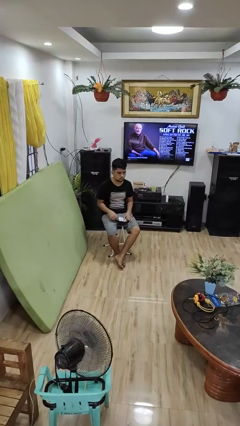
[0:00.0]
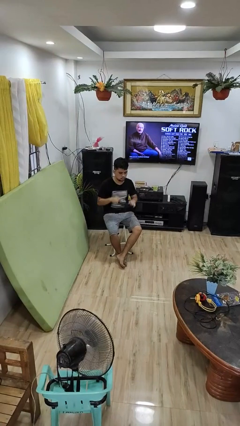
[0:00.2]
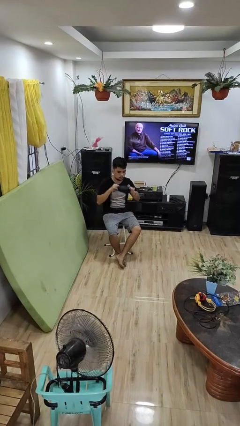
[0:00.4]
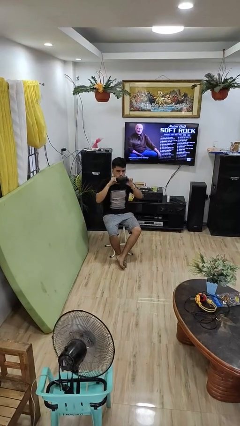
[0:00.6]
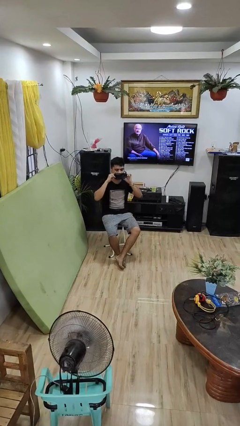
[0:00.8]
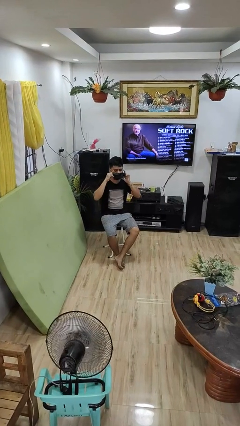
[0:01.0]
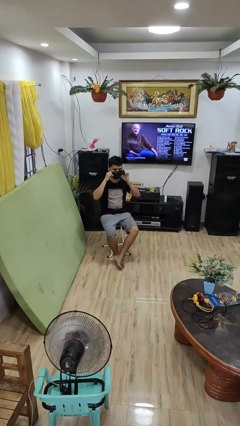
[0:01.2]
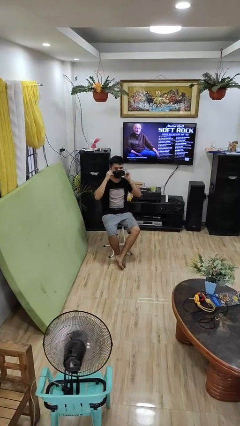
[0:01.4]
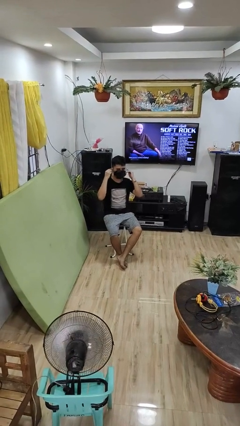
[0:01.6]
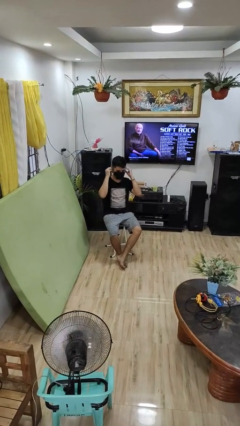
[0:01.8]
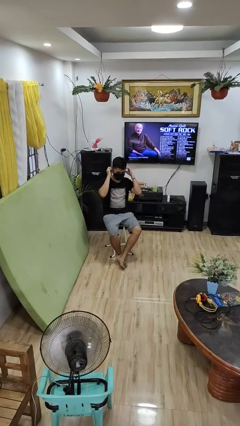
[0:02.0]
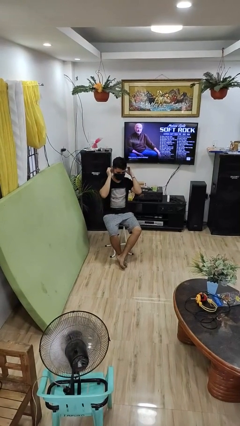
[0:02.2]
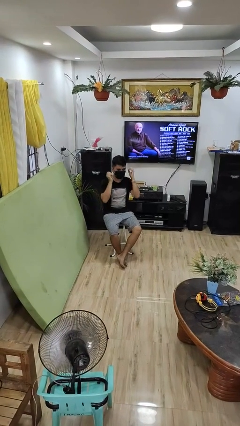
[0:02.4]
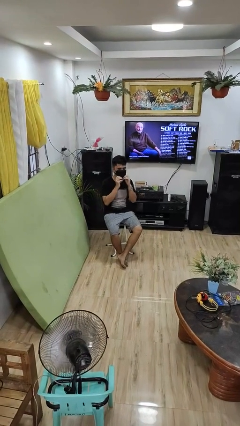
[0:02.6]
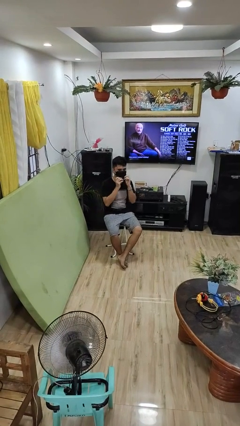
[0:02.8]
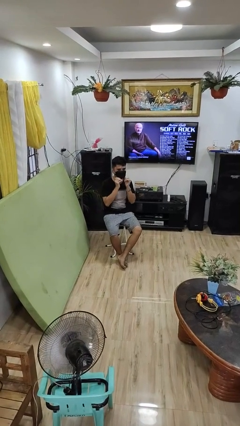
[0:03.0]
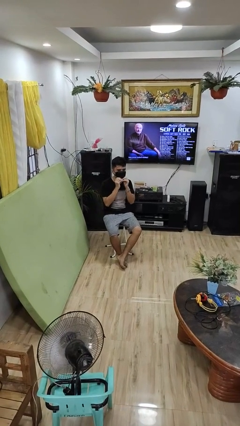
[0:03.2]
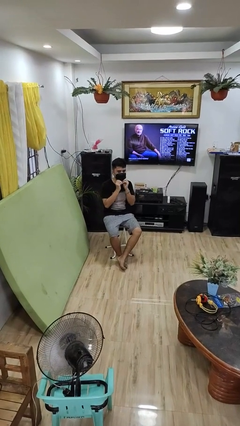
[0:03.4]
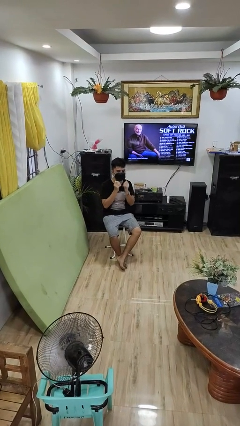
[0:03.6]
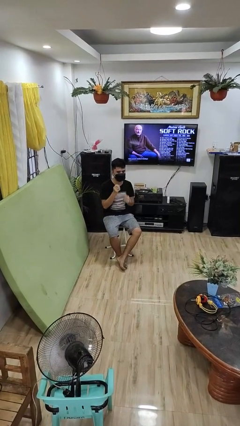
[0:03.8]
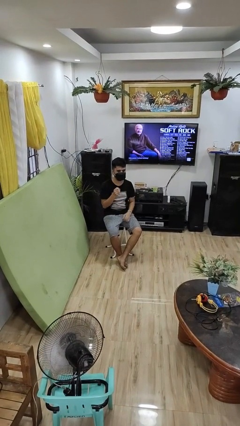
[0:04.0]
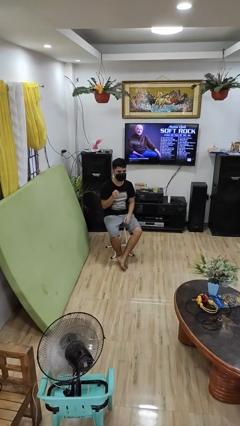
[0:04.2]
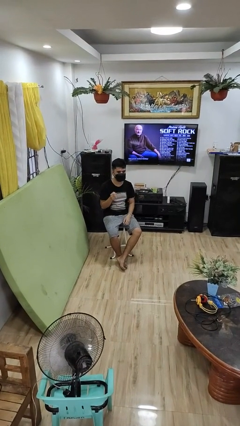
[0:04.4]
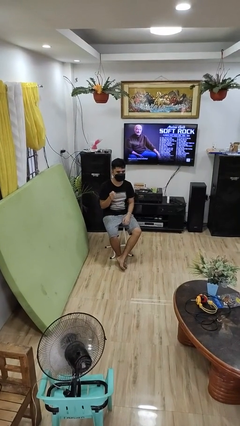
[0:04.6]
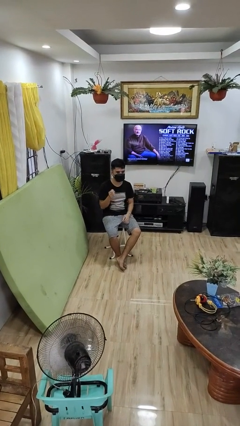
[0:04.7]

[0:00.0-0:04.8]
person puts on facemask

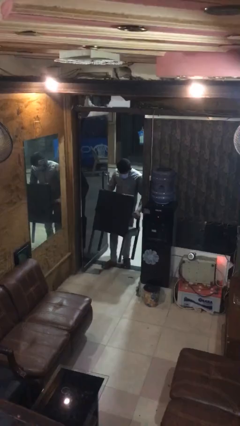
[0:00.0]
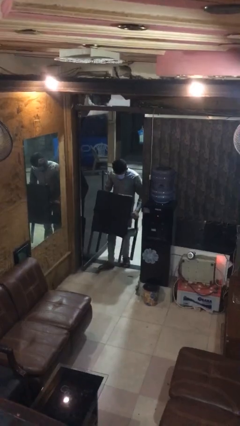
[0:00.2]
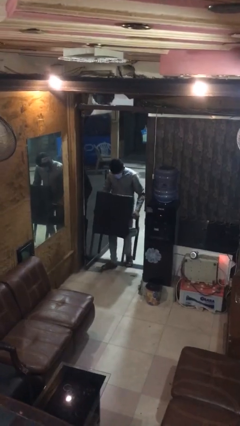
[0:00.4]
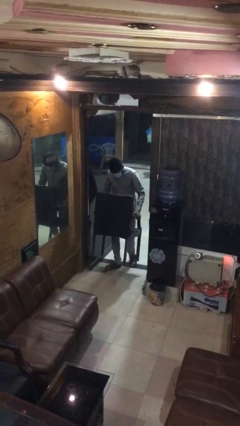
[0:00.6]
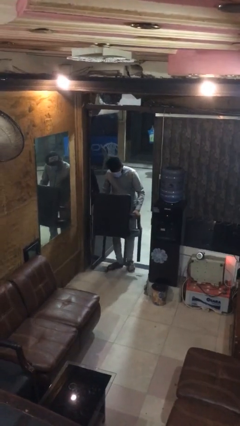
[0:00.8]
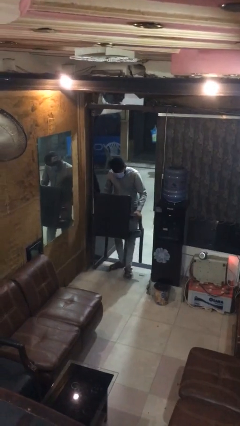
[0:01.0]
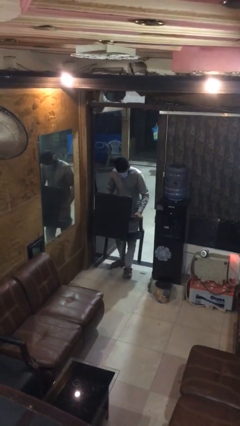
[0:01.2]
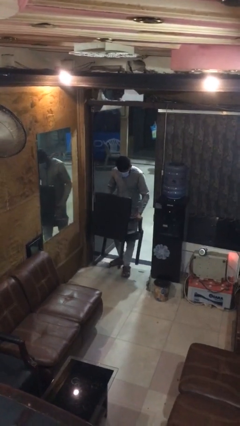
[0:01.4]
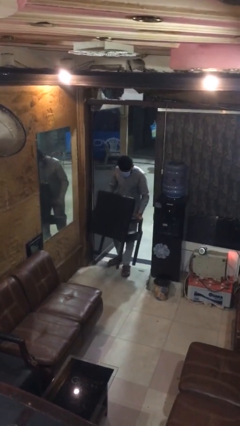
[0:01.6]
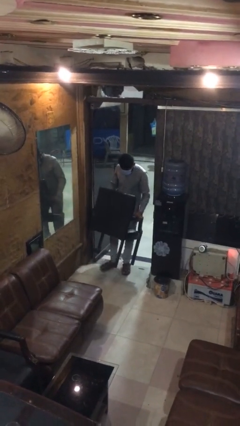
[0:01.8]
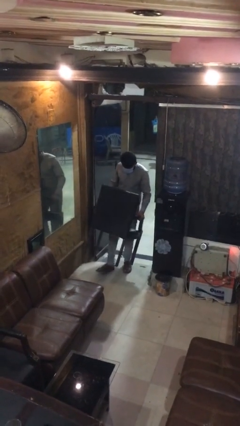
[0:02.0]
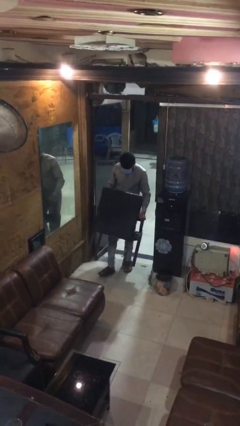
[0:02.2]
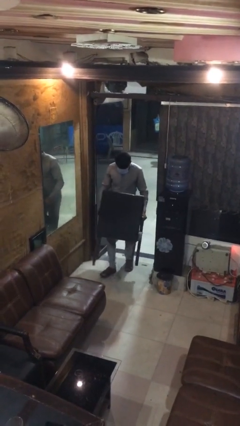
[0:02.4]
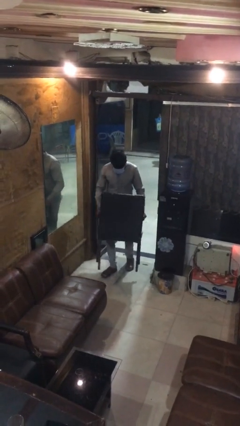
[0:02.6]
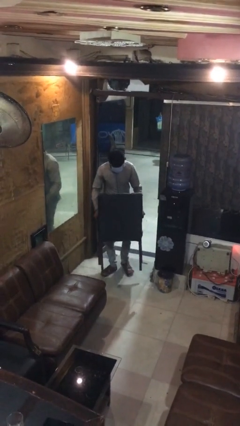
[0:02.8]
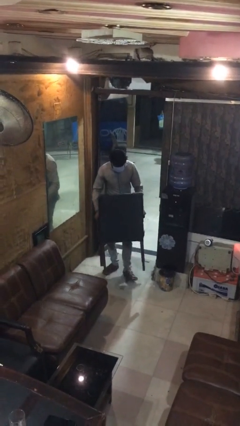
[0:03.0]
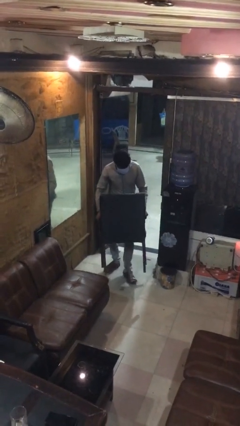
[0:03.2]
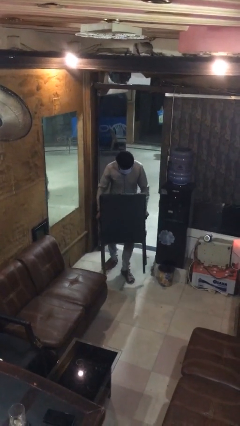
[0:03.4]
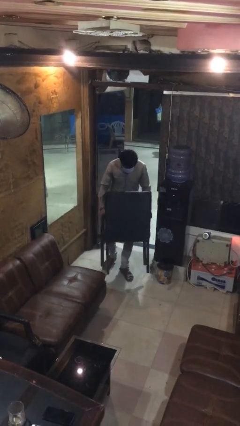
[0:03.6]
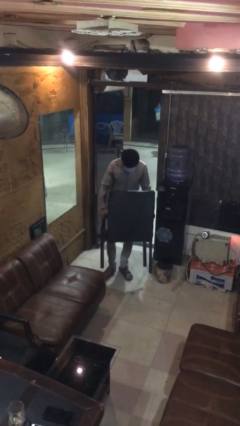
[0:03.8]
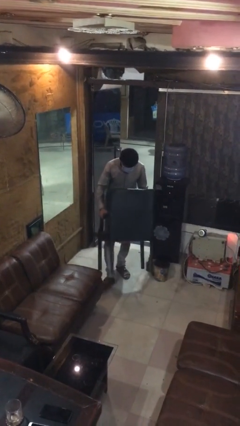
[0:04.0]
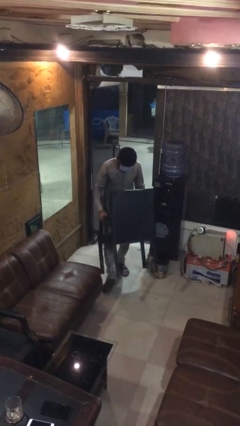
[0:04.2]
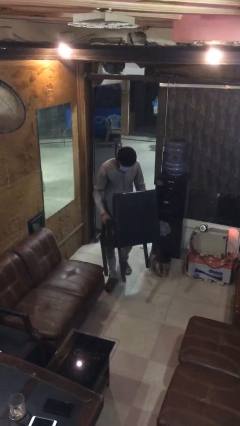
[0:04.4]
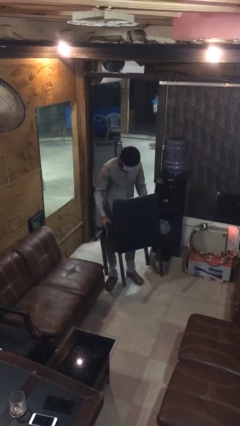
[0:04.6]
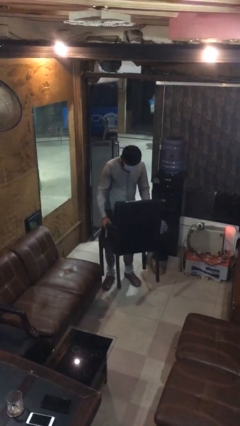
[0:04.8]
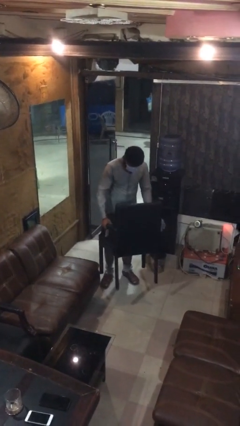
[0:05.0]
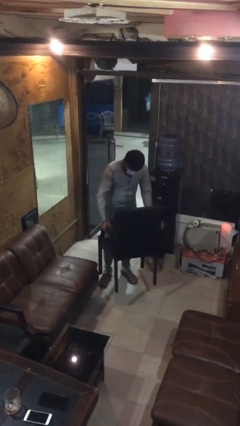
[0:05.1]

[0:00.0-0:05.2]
person carries heavy object

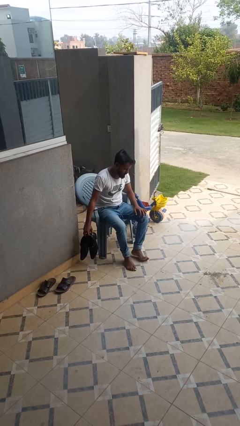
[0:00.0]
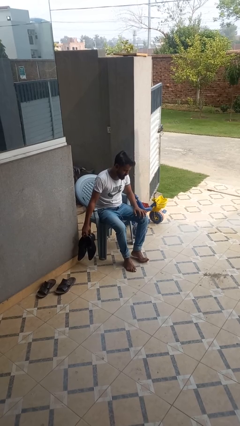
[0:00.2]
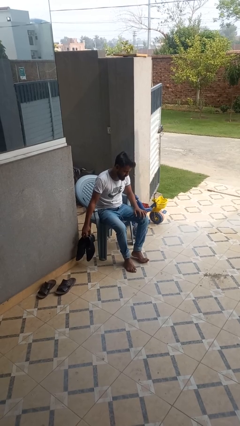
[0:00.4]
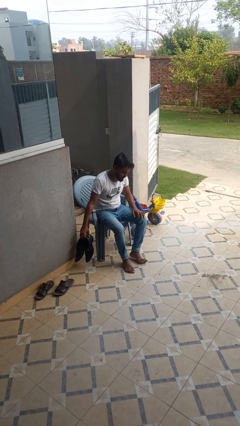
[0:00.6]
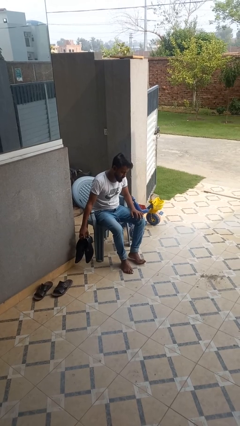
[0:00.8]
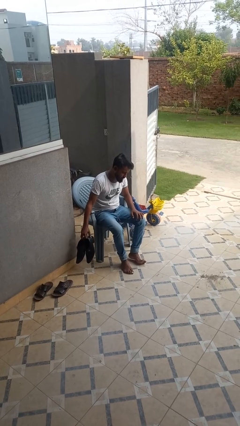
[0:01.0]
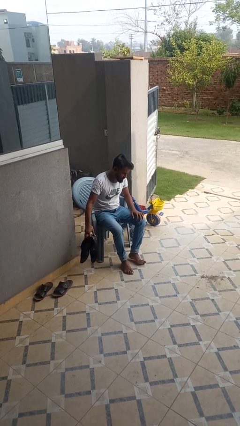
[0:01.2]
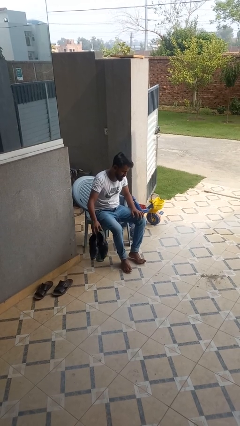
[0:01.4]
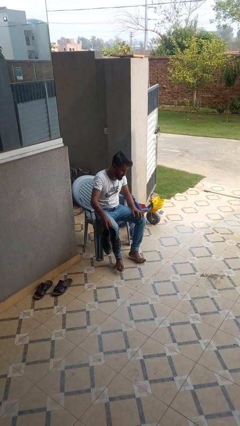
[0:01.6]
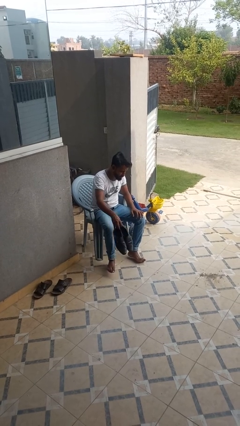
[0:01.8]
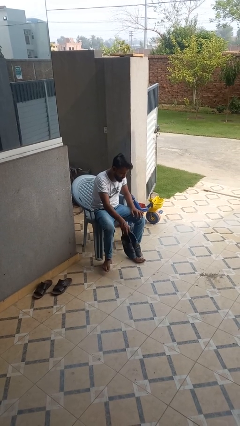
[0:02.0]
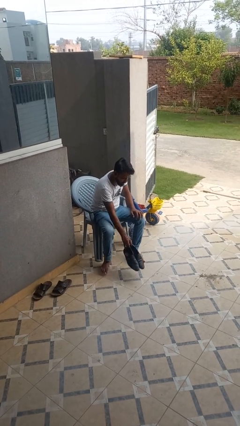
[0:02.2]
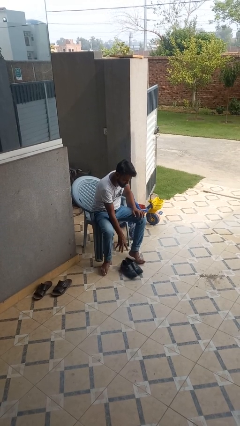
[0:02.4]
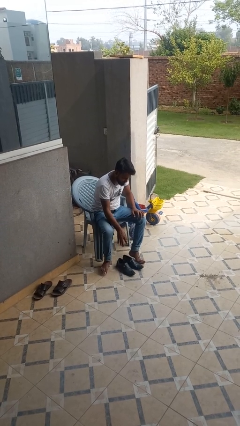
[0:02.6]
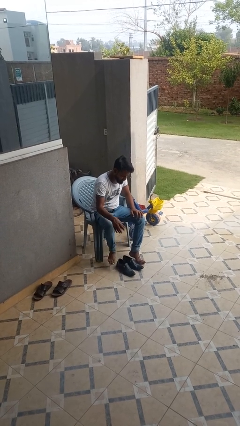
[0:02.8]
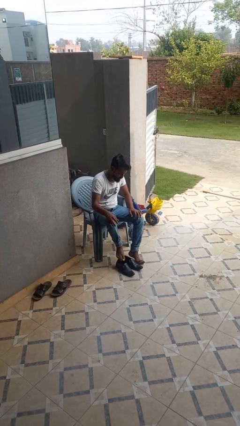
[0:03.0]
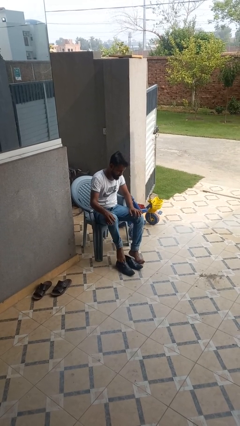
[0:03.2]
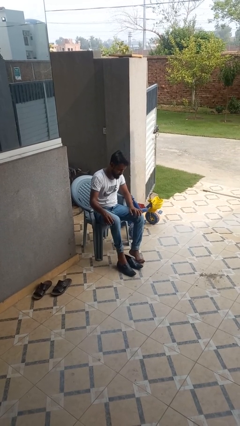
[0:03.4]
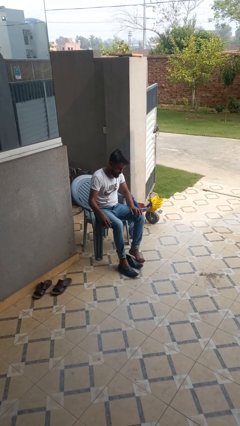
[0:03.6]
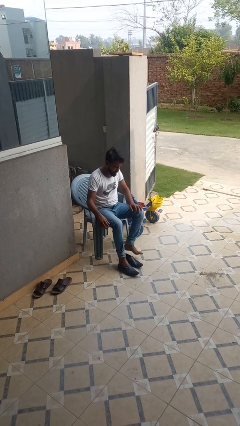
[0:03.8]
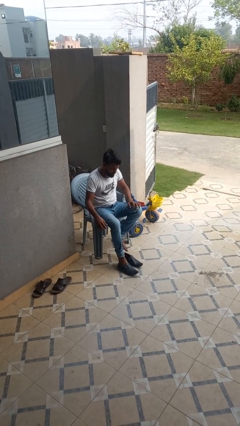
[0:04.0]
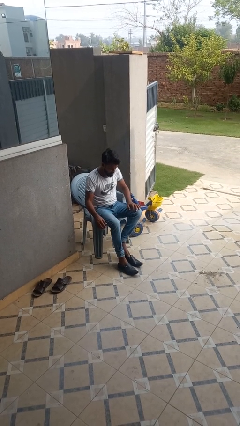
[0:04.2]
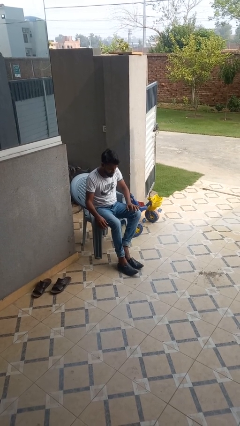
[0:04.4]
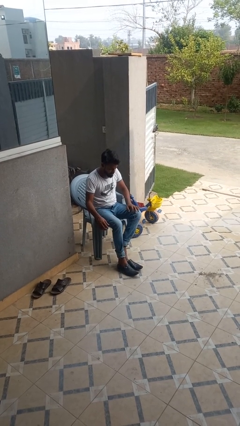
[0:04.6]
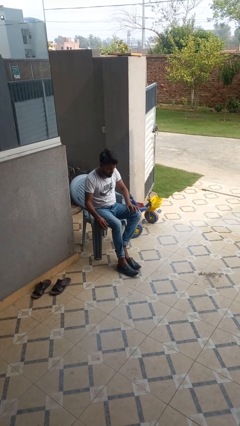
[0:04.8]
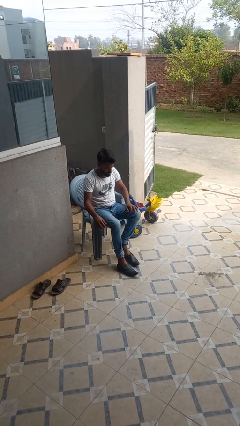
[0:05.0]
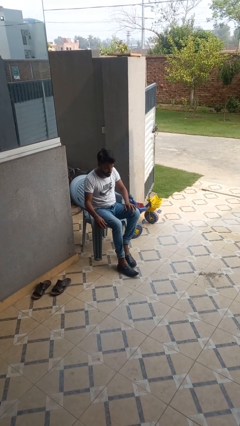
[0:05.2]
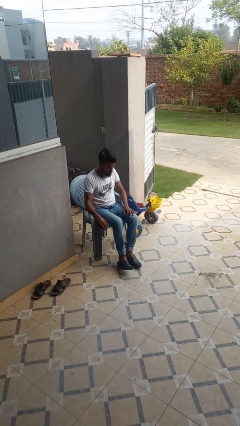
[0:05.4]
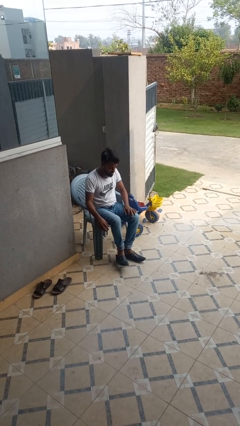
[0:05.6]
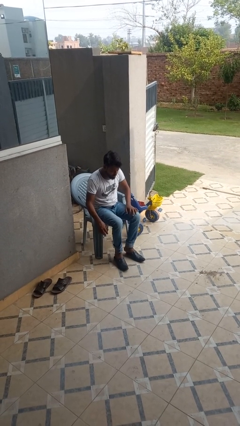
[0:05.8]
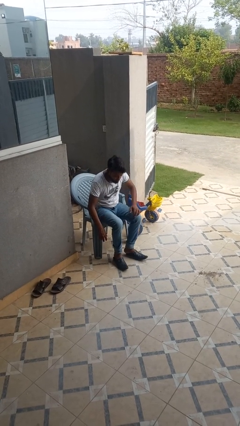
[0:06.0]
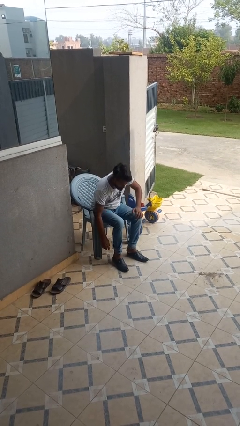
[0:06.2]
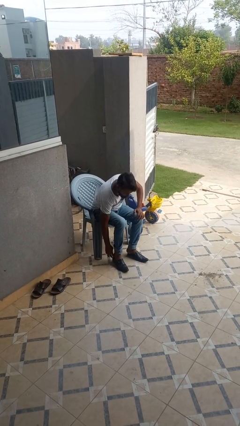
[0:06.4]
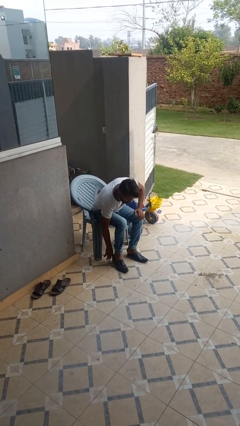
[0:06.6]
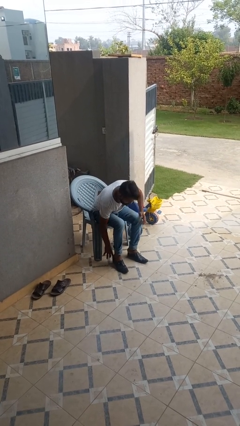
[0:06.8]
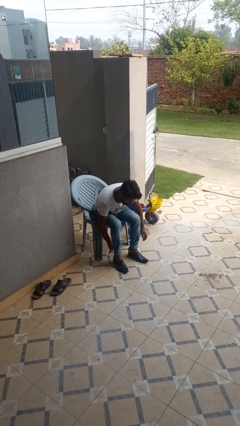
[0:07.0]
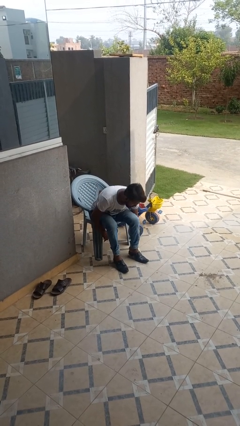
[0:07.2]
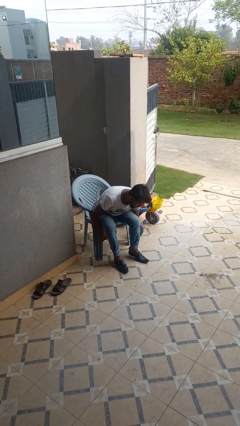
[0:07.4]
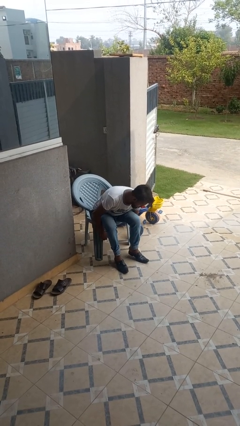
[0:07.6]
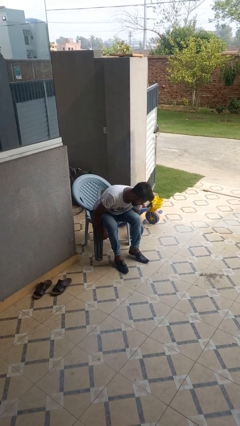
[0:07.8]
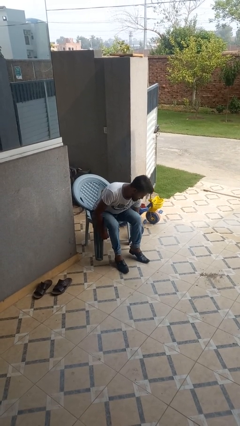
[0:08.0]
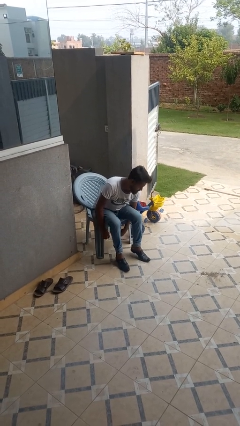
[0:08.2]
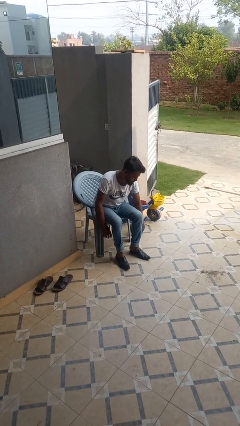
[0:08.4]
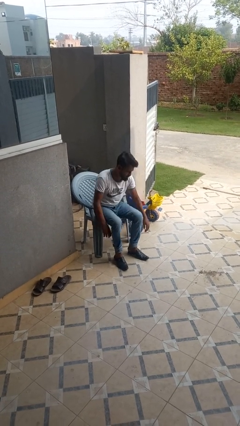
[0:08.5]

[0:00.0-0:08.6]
person puts on shoes
